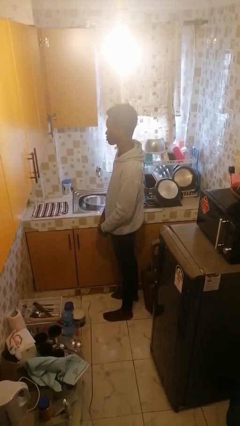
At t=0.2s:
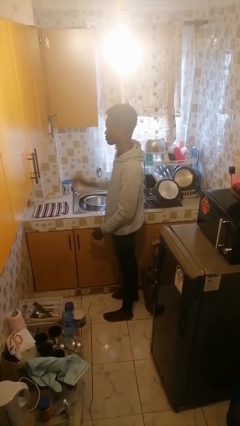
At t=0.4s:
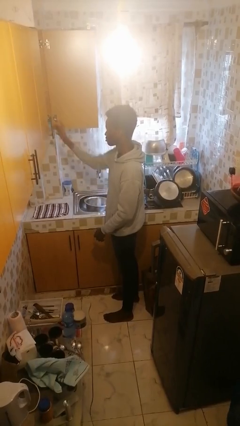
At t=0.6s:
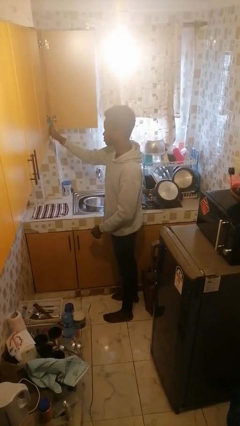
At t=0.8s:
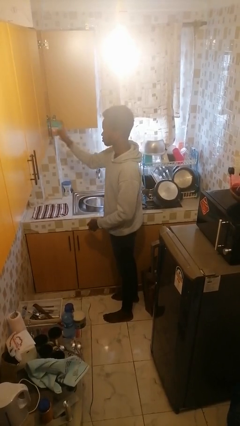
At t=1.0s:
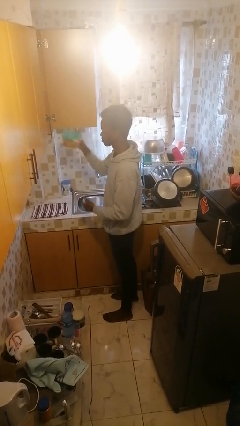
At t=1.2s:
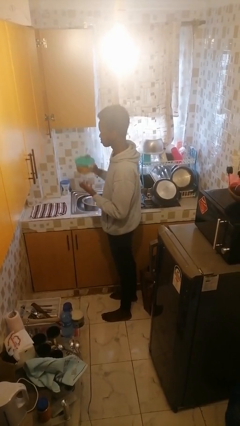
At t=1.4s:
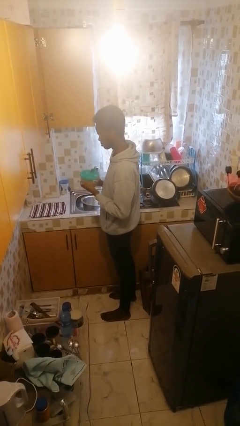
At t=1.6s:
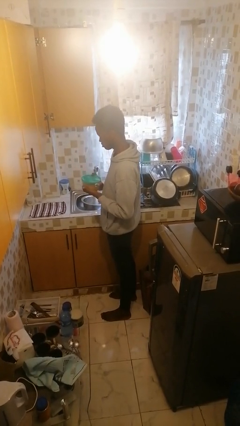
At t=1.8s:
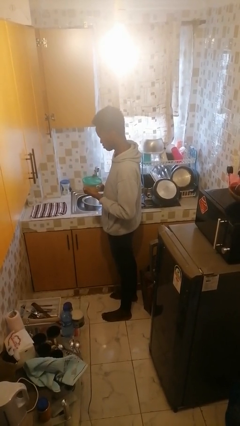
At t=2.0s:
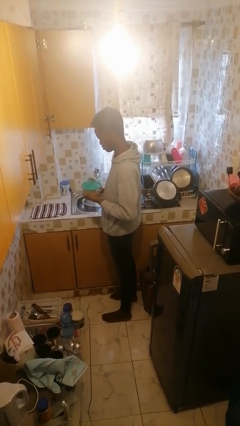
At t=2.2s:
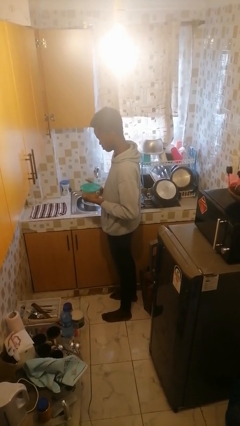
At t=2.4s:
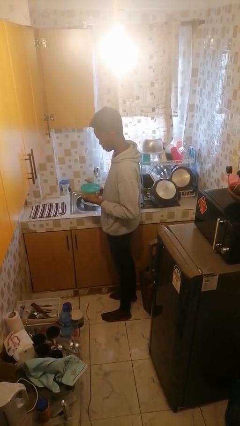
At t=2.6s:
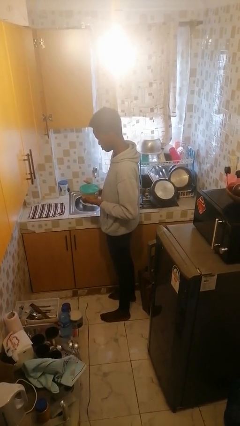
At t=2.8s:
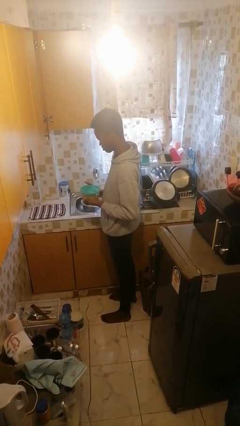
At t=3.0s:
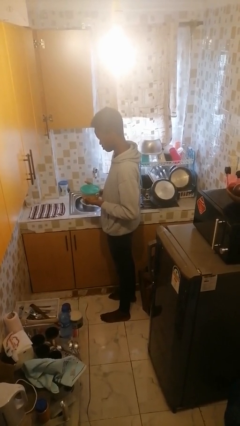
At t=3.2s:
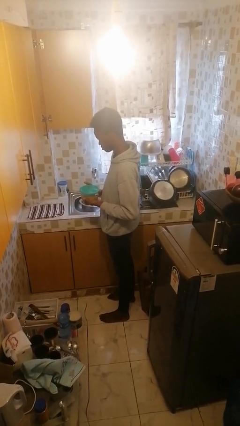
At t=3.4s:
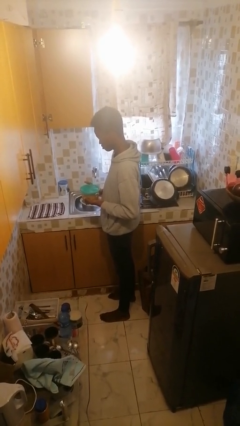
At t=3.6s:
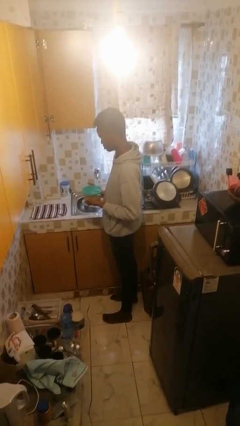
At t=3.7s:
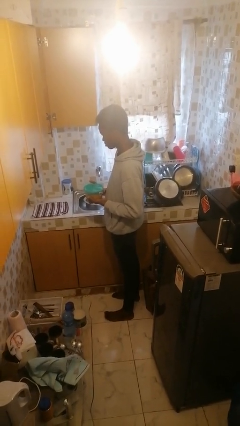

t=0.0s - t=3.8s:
person picks up object from cabinet

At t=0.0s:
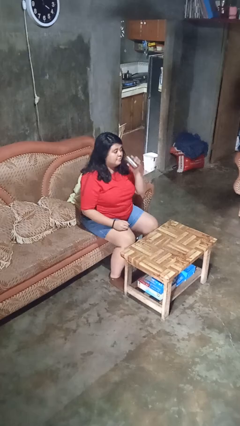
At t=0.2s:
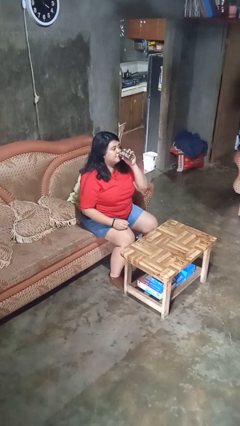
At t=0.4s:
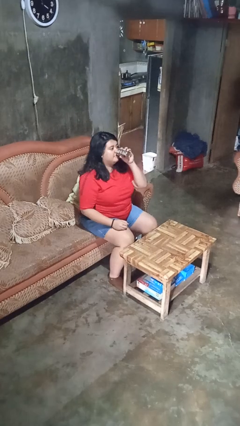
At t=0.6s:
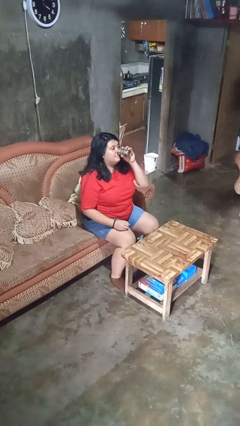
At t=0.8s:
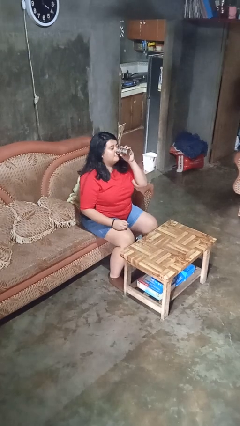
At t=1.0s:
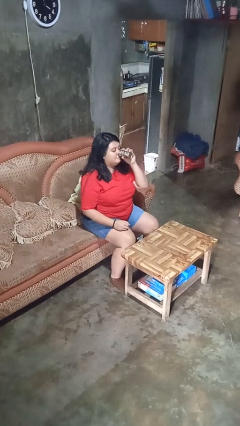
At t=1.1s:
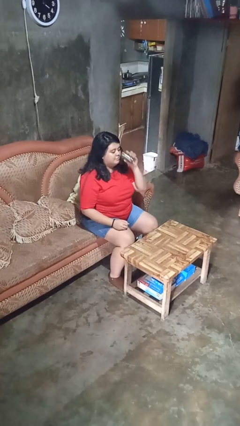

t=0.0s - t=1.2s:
person drinks from beverage can

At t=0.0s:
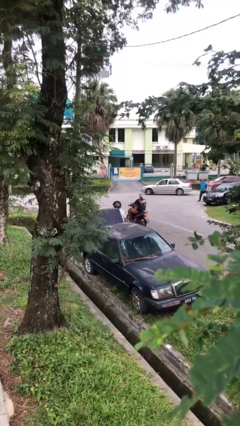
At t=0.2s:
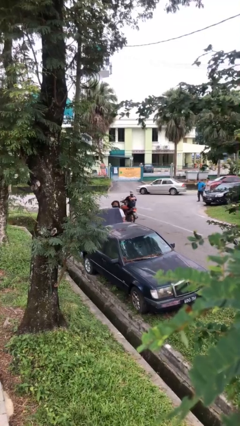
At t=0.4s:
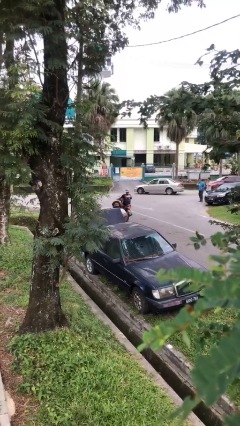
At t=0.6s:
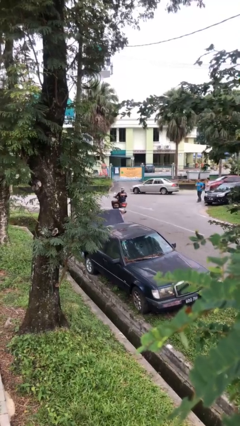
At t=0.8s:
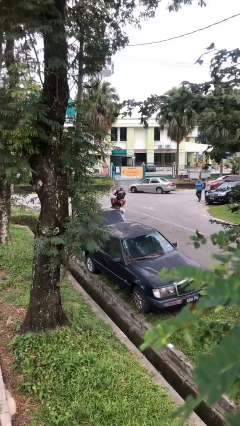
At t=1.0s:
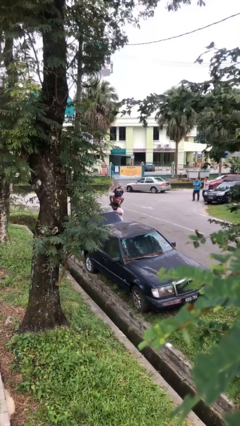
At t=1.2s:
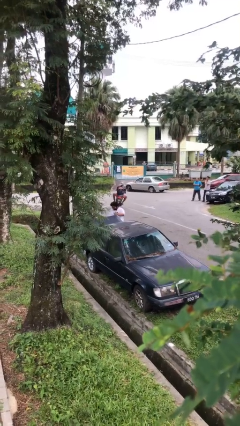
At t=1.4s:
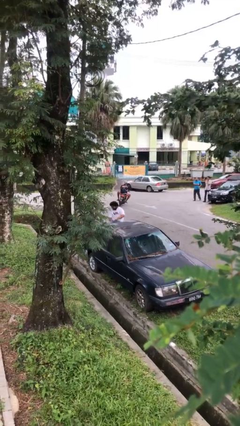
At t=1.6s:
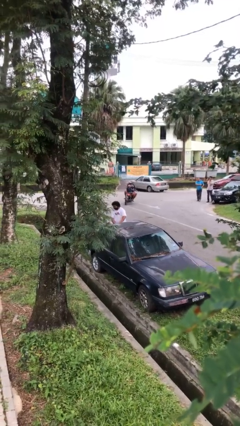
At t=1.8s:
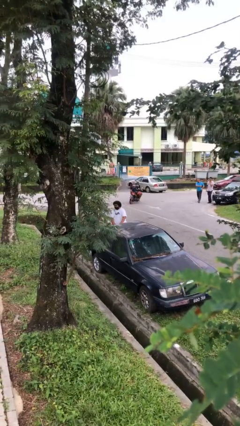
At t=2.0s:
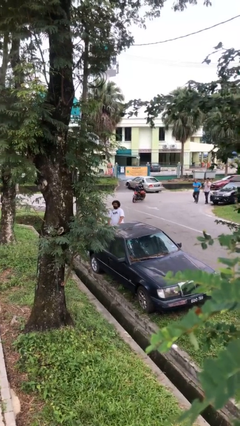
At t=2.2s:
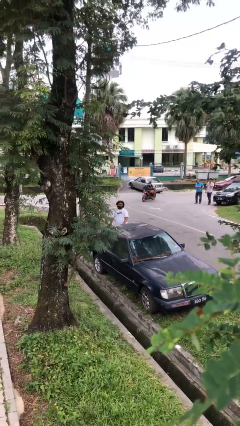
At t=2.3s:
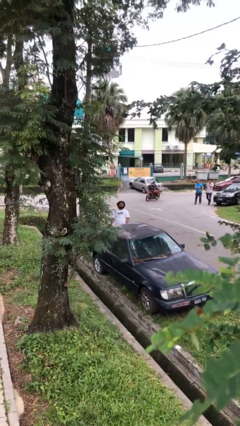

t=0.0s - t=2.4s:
person closes car trunk

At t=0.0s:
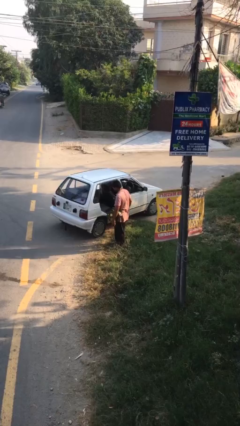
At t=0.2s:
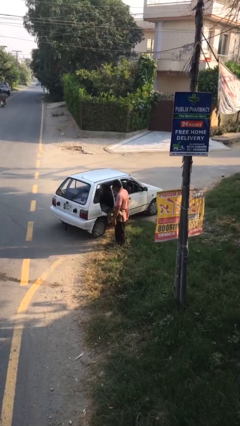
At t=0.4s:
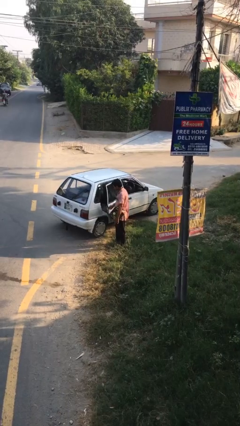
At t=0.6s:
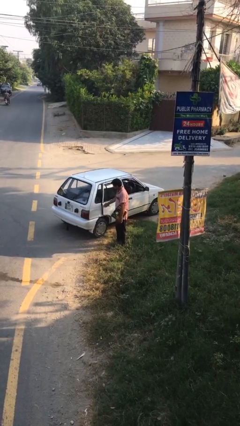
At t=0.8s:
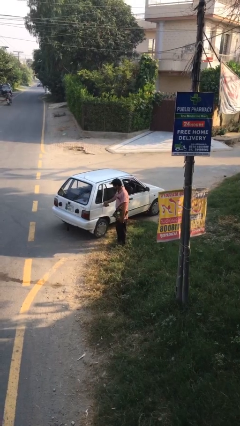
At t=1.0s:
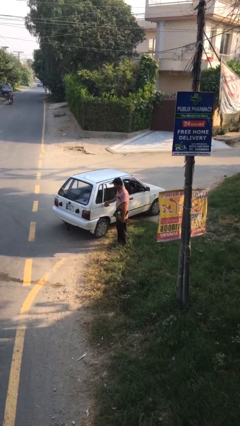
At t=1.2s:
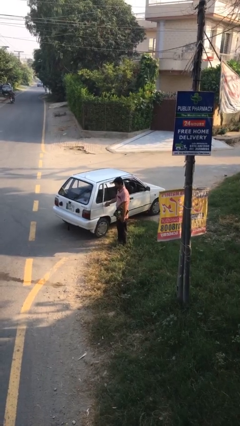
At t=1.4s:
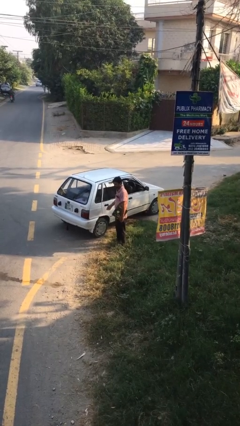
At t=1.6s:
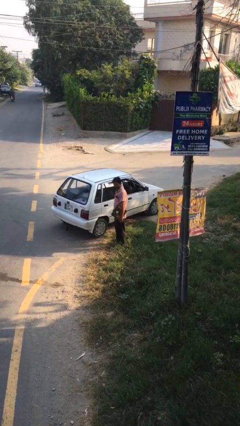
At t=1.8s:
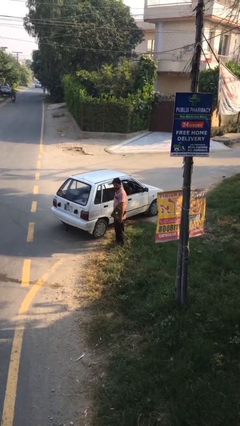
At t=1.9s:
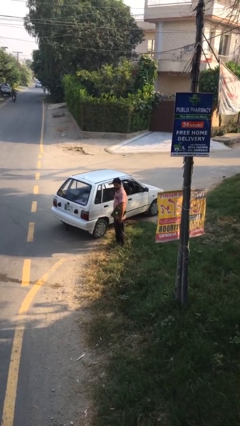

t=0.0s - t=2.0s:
person closes car door

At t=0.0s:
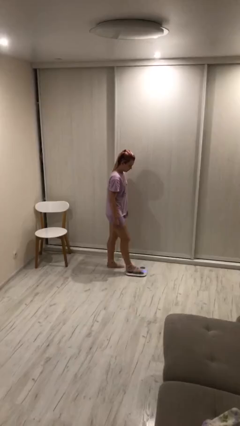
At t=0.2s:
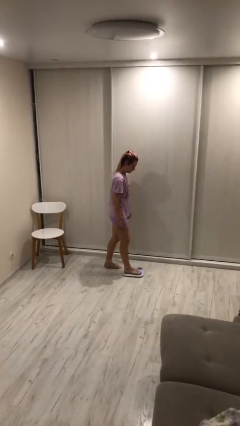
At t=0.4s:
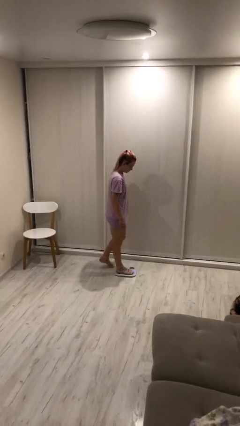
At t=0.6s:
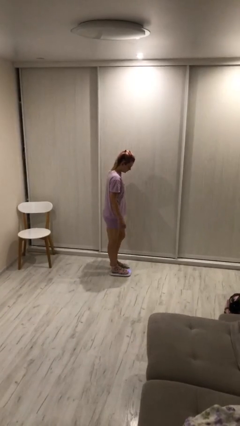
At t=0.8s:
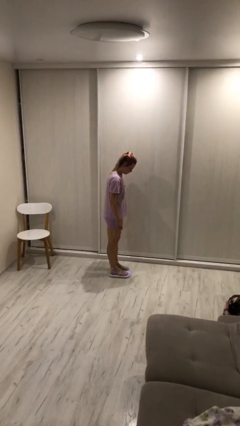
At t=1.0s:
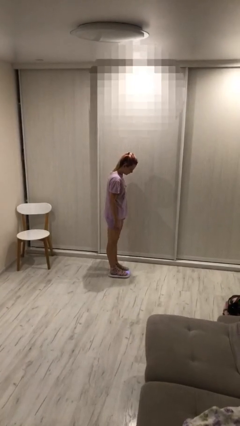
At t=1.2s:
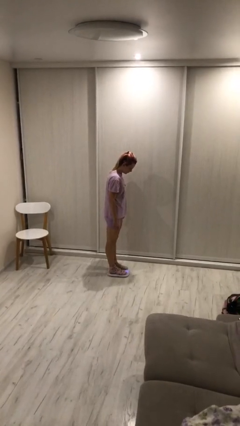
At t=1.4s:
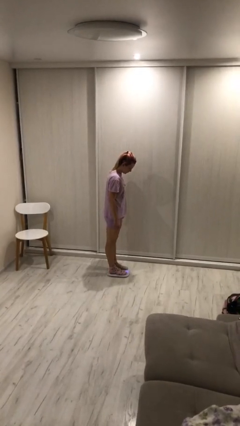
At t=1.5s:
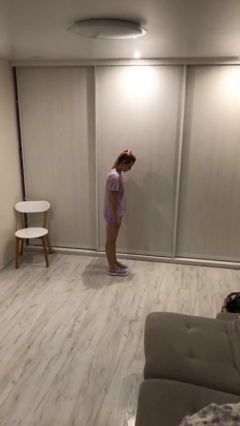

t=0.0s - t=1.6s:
person uses bodyweight scale

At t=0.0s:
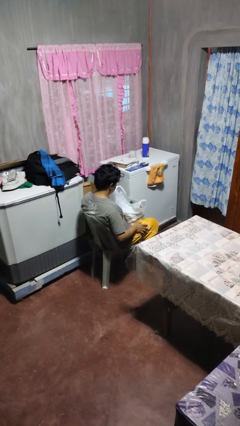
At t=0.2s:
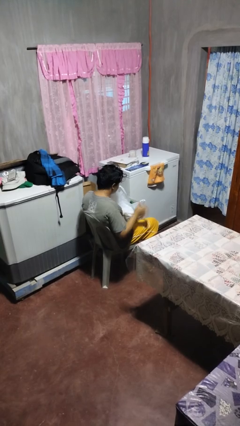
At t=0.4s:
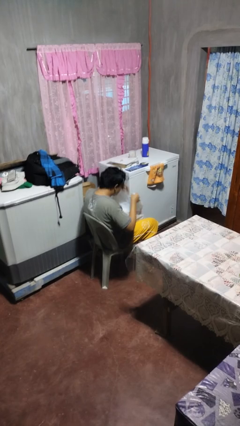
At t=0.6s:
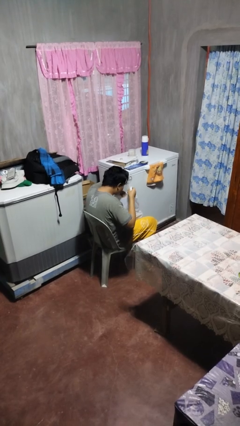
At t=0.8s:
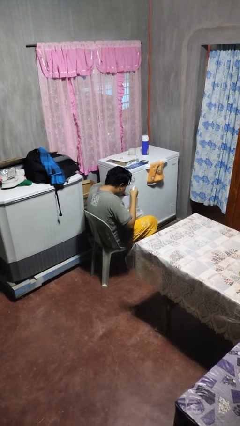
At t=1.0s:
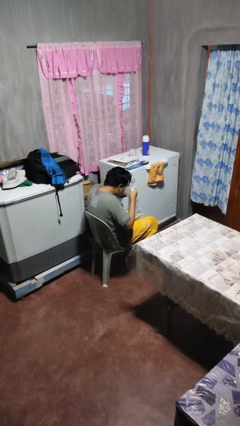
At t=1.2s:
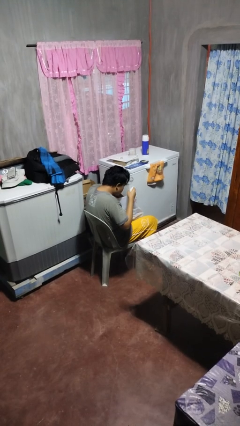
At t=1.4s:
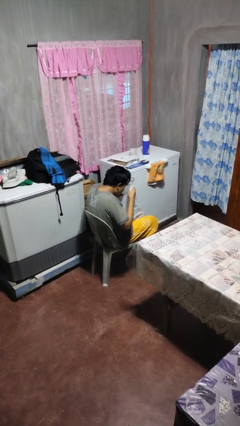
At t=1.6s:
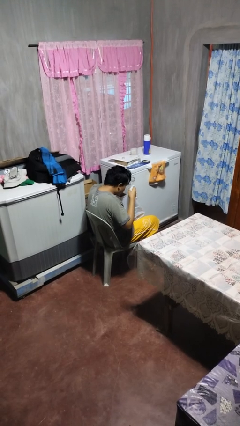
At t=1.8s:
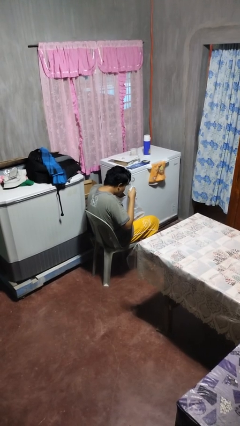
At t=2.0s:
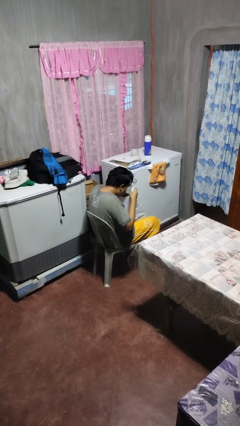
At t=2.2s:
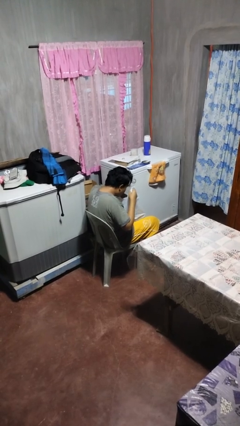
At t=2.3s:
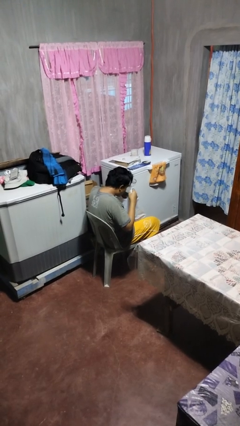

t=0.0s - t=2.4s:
person searches in bag

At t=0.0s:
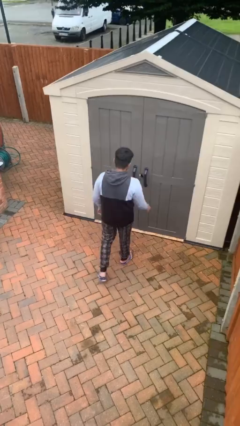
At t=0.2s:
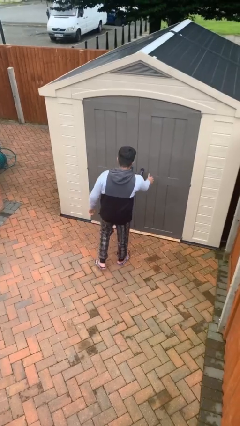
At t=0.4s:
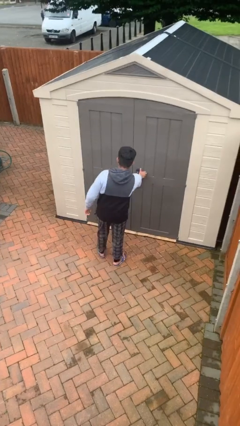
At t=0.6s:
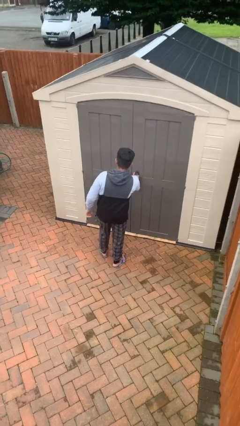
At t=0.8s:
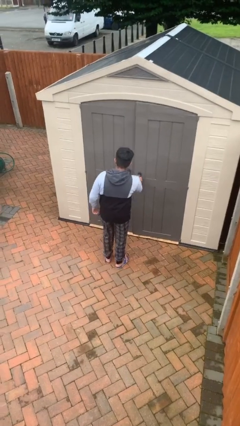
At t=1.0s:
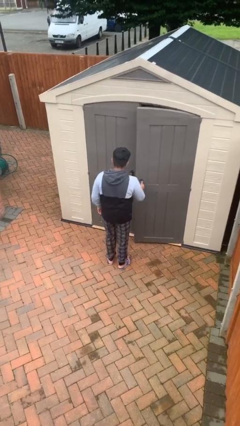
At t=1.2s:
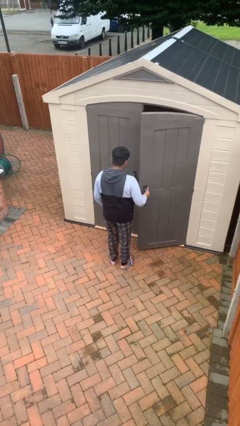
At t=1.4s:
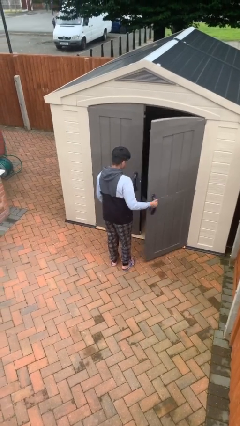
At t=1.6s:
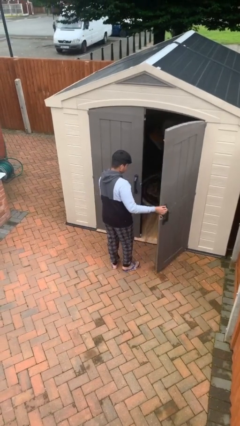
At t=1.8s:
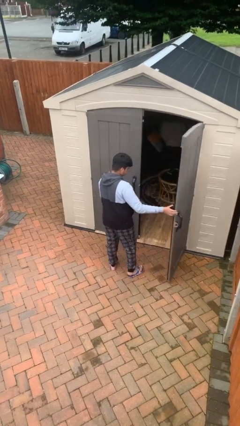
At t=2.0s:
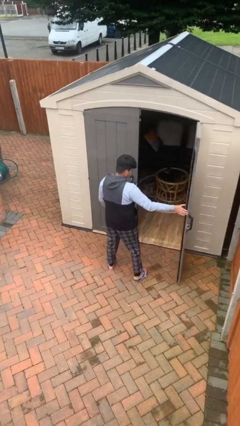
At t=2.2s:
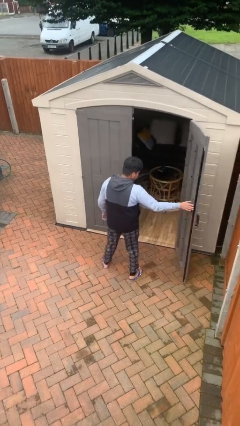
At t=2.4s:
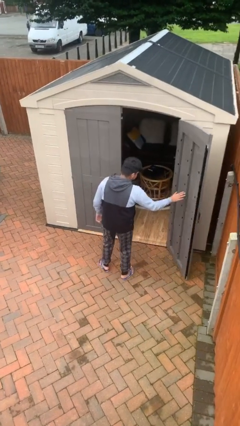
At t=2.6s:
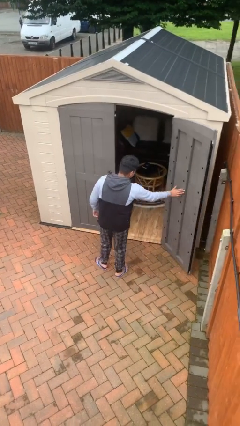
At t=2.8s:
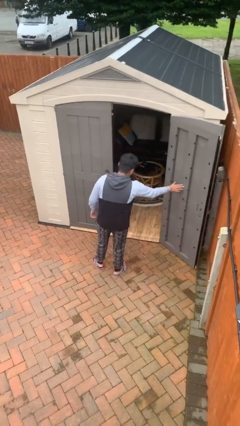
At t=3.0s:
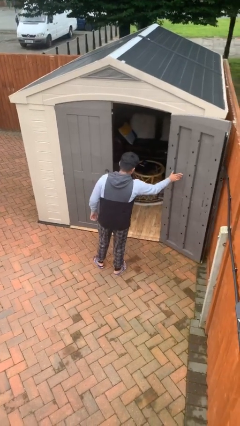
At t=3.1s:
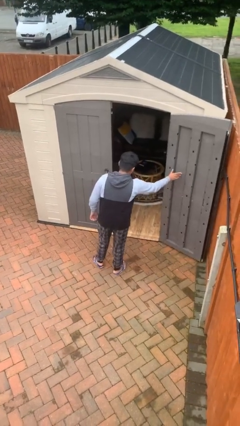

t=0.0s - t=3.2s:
person opens facility door

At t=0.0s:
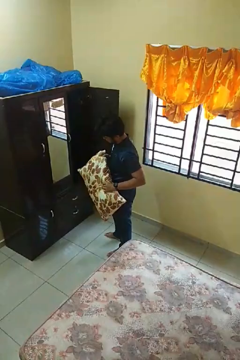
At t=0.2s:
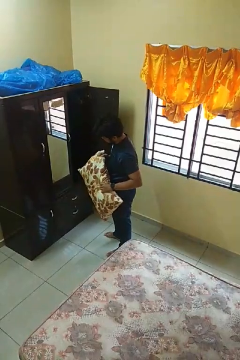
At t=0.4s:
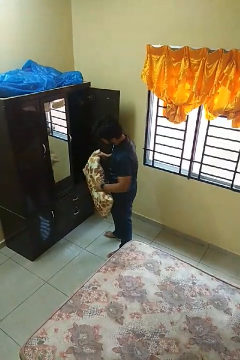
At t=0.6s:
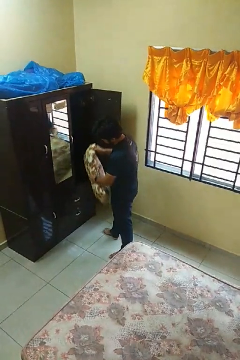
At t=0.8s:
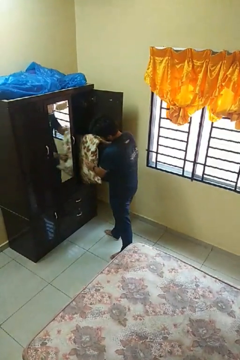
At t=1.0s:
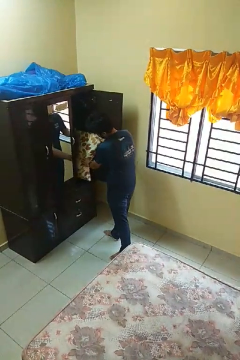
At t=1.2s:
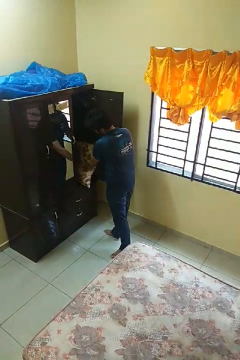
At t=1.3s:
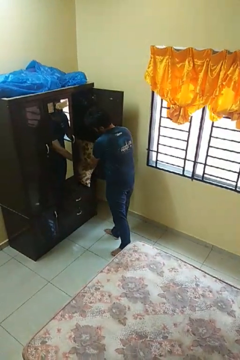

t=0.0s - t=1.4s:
person puts down object into cabinet
